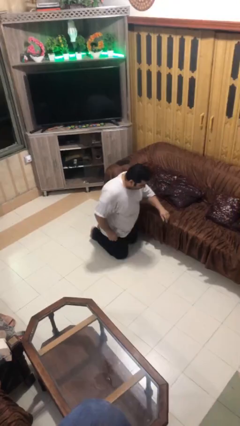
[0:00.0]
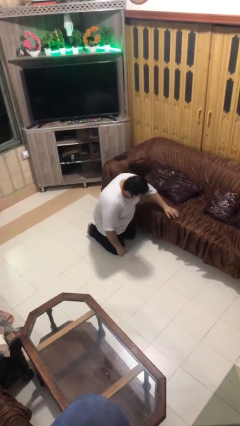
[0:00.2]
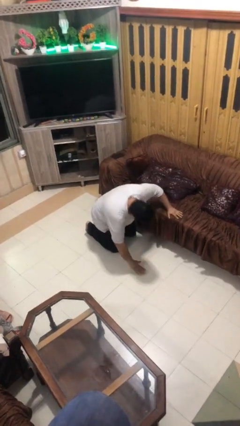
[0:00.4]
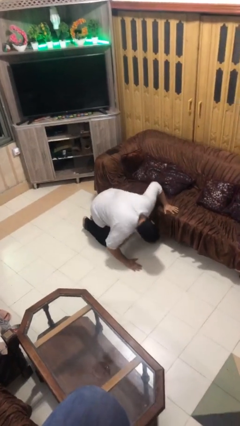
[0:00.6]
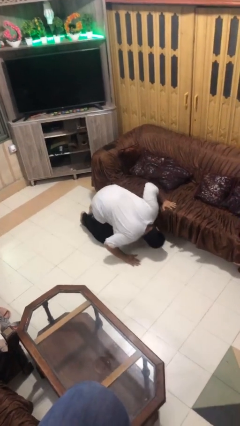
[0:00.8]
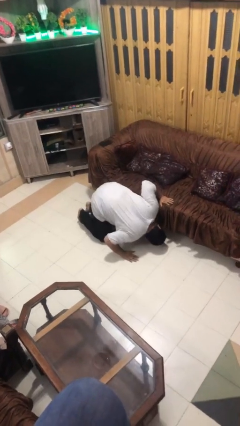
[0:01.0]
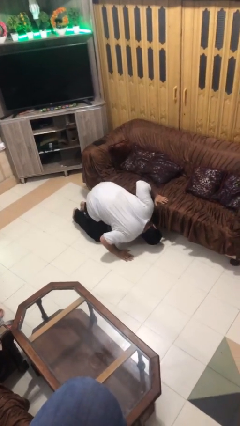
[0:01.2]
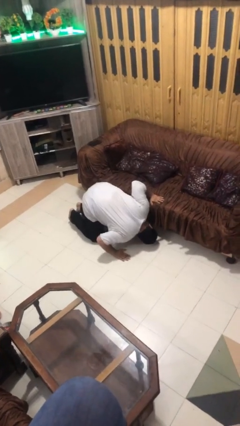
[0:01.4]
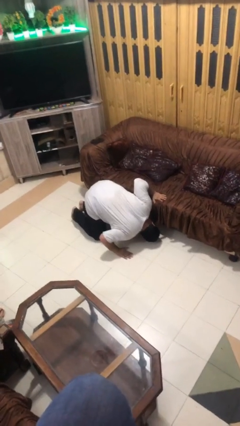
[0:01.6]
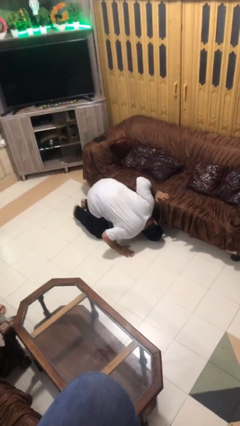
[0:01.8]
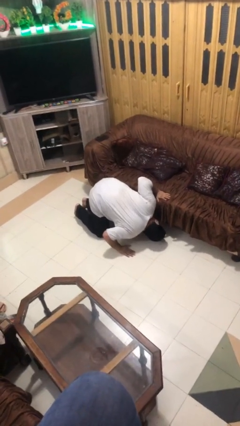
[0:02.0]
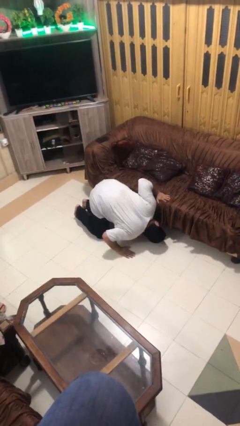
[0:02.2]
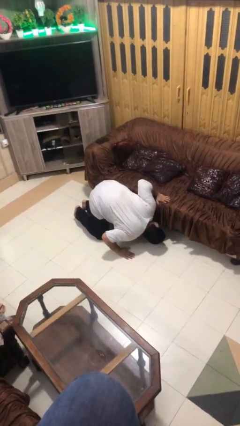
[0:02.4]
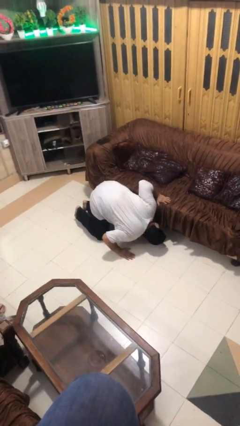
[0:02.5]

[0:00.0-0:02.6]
person searches under couch

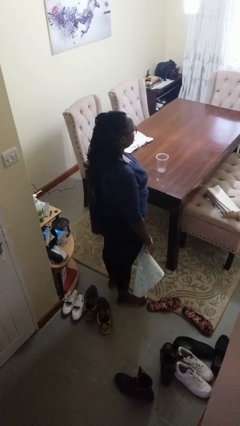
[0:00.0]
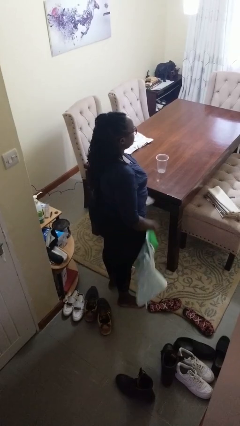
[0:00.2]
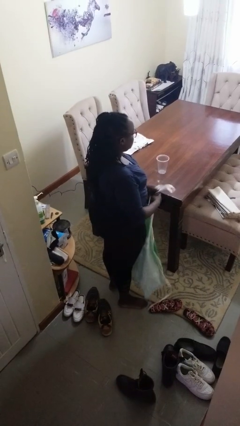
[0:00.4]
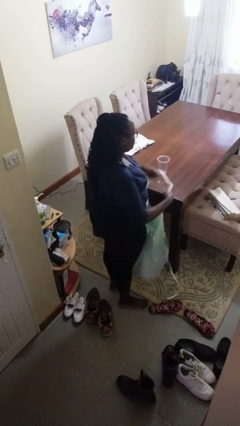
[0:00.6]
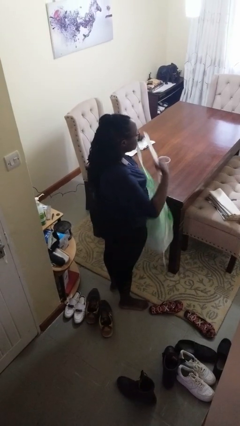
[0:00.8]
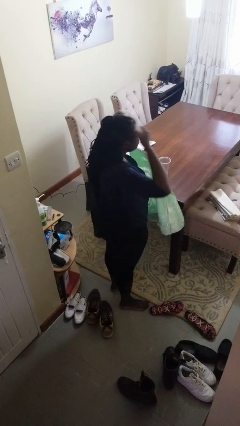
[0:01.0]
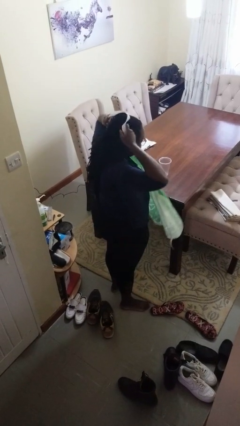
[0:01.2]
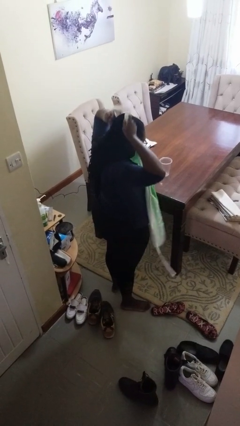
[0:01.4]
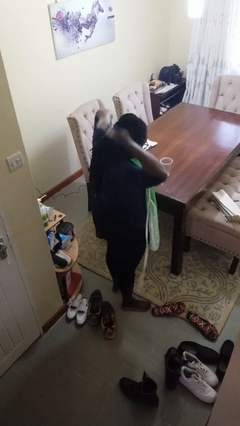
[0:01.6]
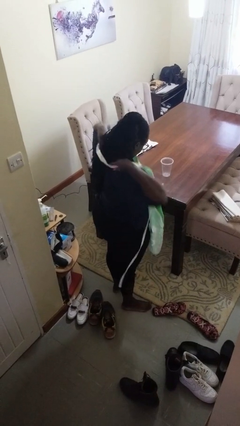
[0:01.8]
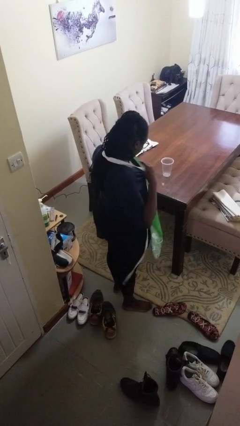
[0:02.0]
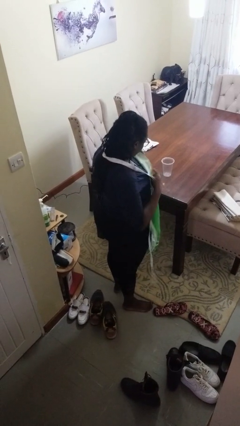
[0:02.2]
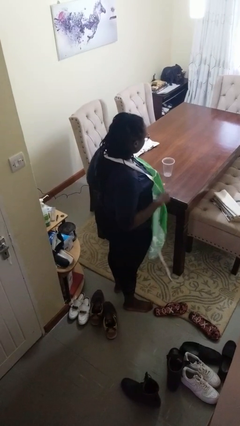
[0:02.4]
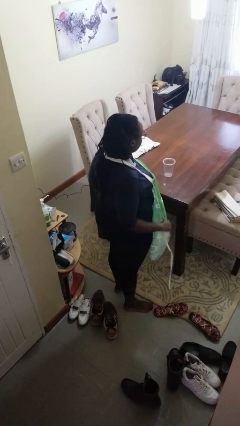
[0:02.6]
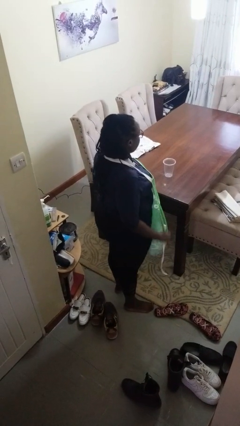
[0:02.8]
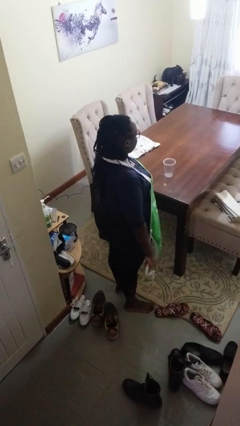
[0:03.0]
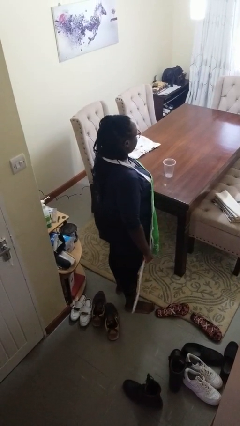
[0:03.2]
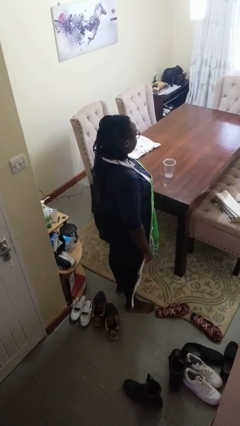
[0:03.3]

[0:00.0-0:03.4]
person puts on apron

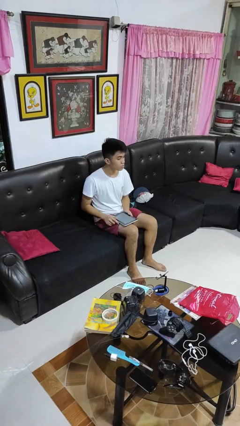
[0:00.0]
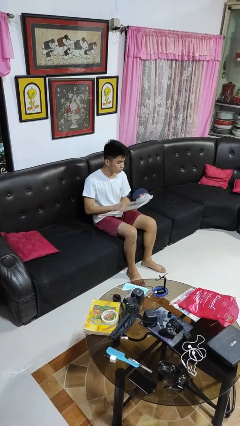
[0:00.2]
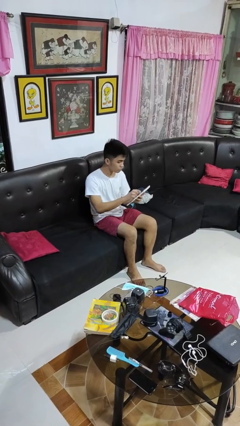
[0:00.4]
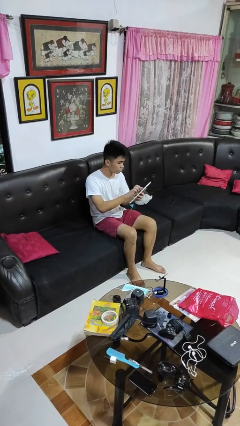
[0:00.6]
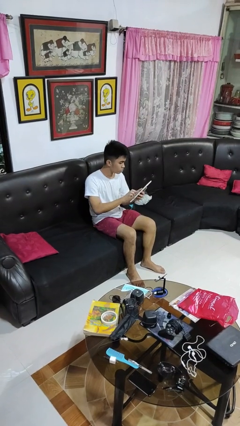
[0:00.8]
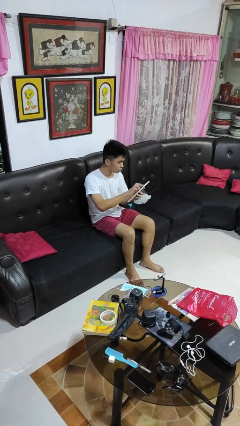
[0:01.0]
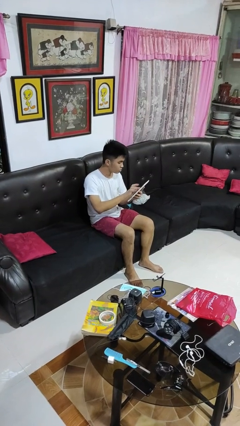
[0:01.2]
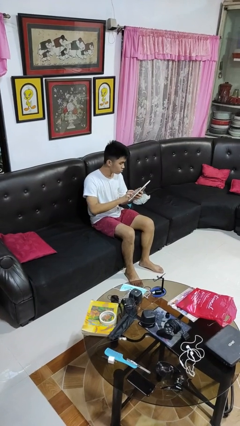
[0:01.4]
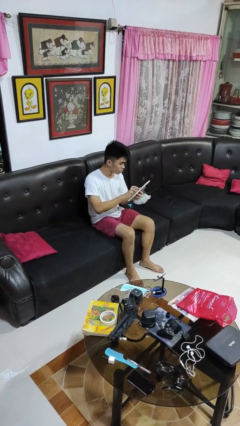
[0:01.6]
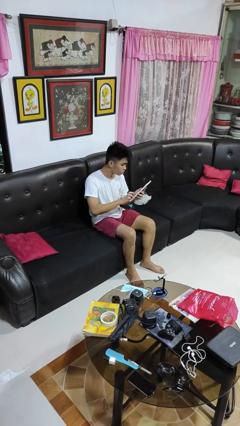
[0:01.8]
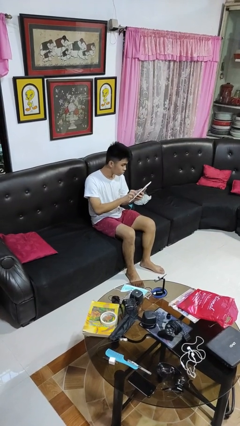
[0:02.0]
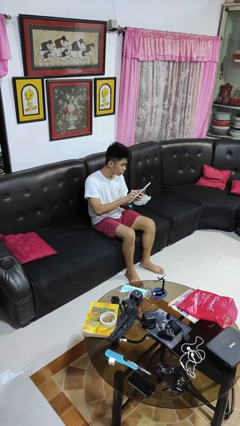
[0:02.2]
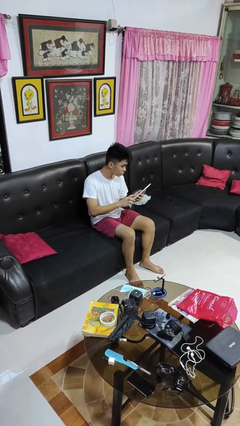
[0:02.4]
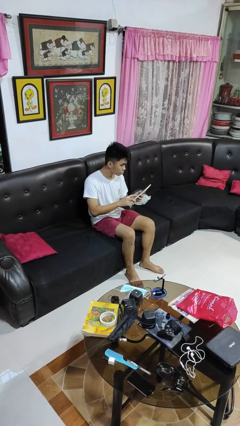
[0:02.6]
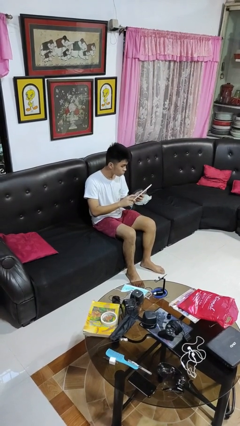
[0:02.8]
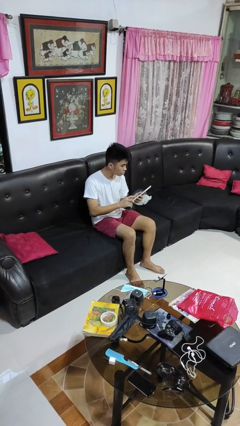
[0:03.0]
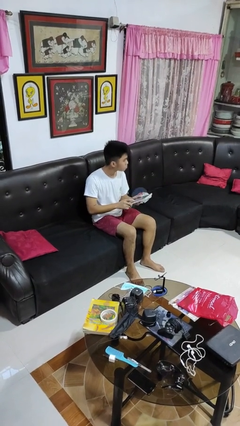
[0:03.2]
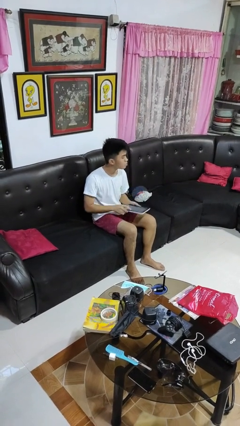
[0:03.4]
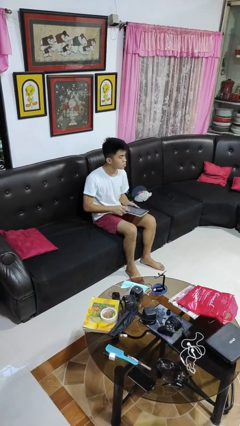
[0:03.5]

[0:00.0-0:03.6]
person interacts with tablet

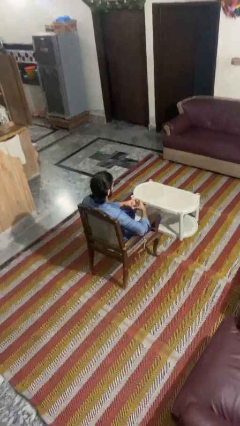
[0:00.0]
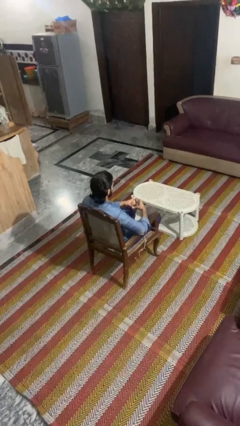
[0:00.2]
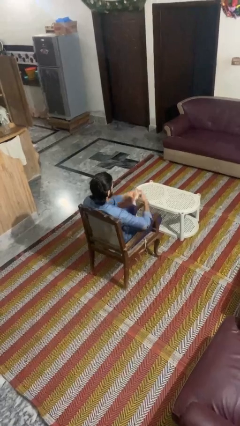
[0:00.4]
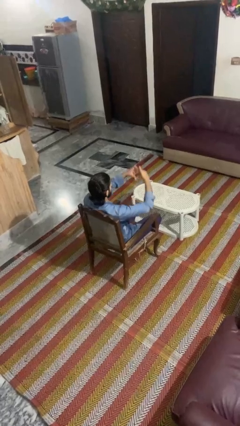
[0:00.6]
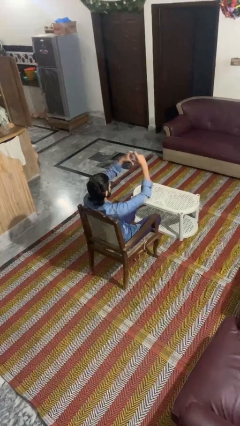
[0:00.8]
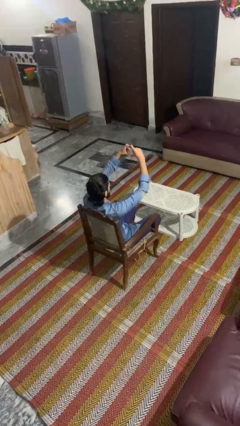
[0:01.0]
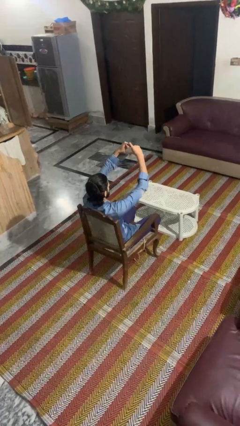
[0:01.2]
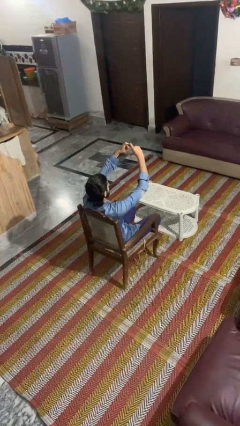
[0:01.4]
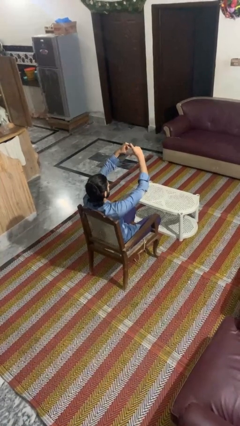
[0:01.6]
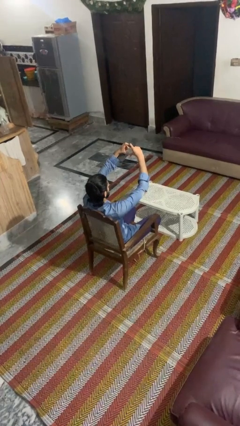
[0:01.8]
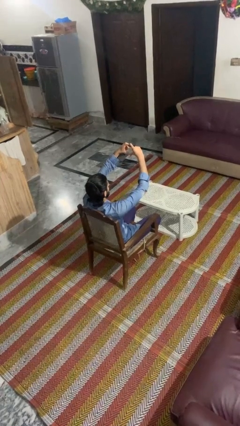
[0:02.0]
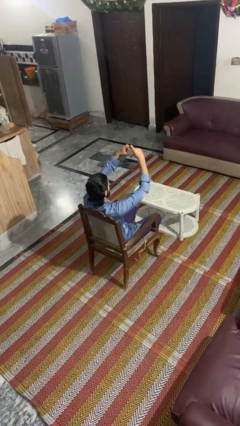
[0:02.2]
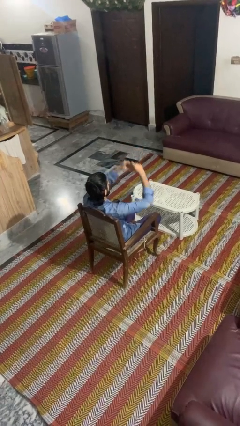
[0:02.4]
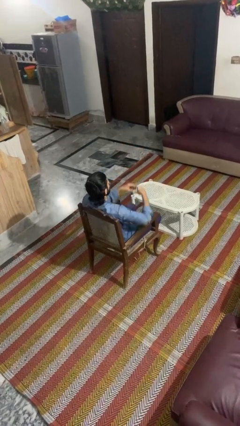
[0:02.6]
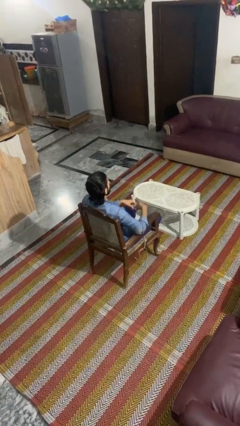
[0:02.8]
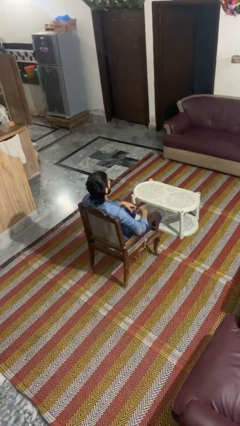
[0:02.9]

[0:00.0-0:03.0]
person gestures heart

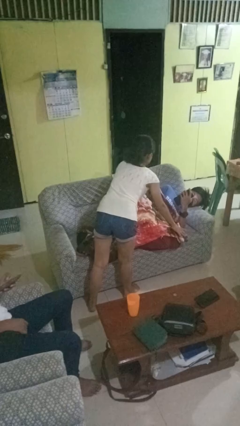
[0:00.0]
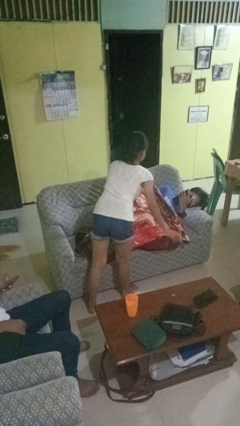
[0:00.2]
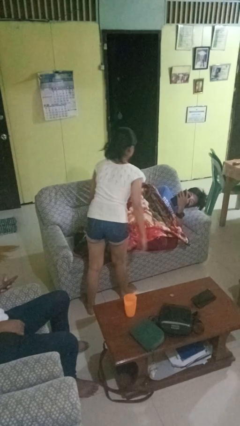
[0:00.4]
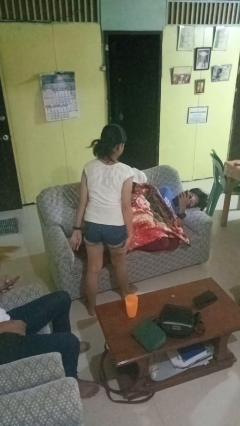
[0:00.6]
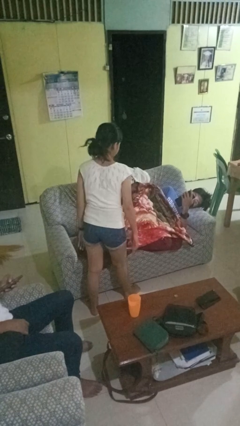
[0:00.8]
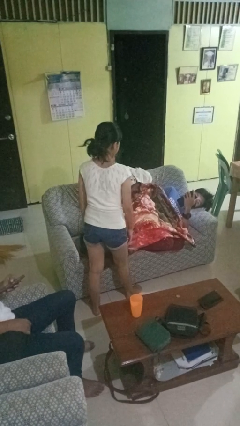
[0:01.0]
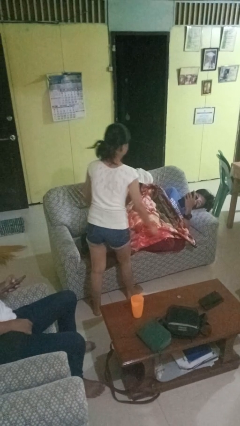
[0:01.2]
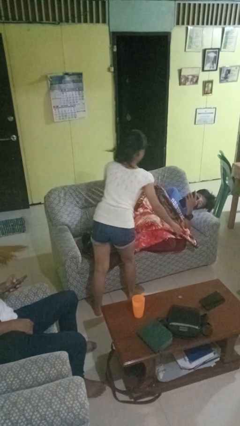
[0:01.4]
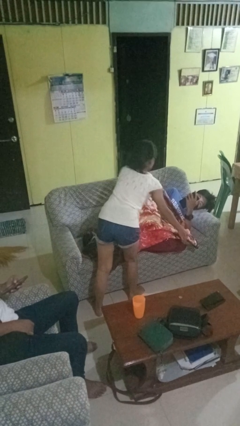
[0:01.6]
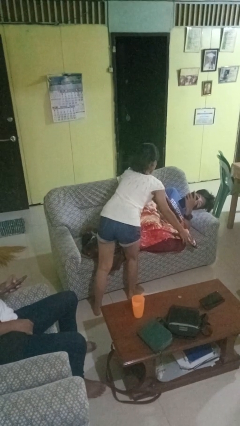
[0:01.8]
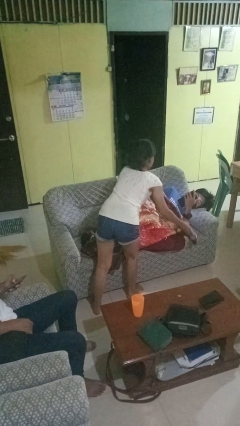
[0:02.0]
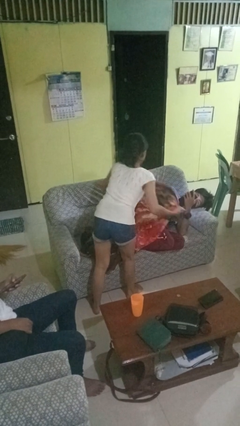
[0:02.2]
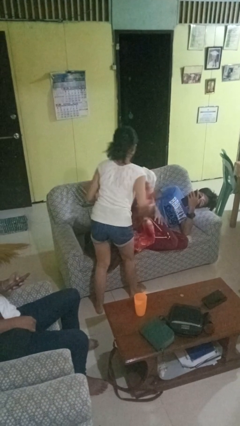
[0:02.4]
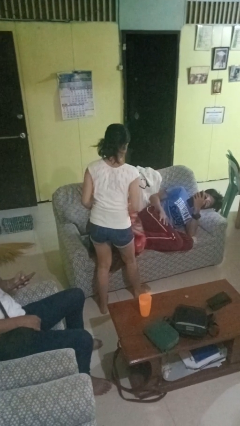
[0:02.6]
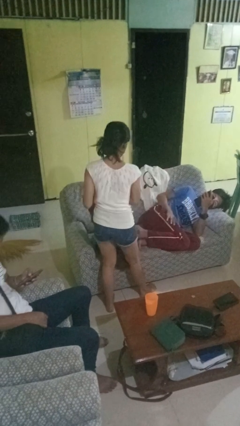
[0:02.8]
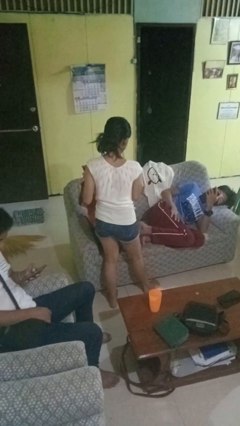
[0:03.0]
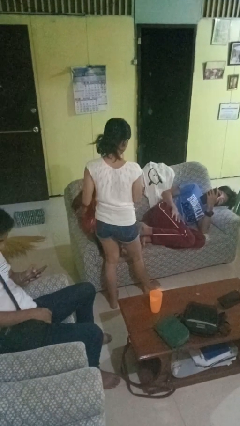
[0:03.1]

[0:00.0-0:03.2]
person uncovers friend with blanket

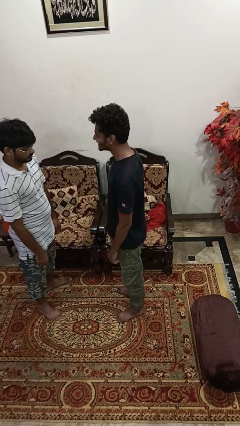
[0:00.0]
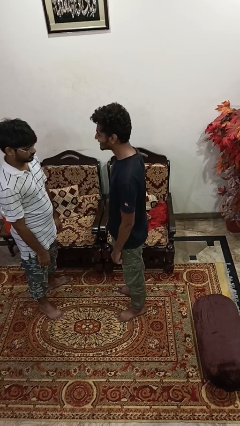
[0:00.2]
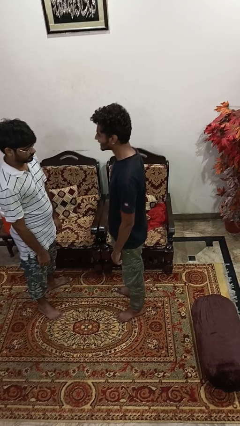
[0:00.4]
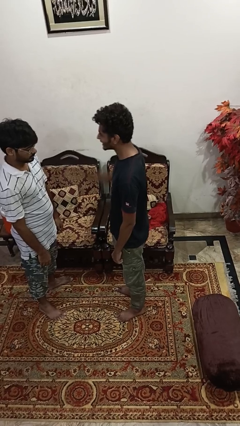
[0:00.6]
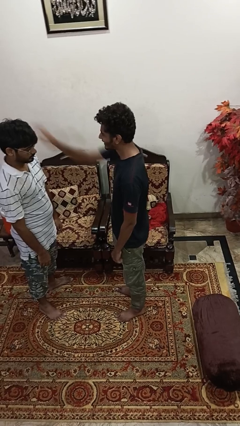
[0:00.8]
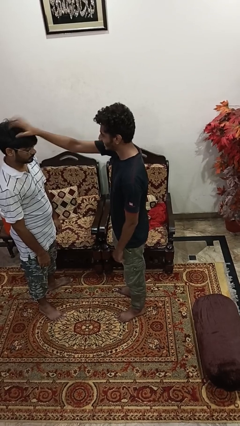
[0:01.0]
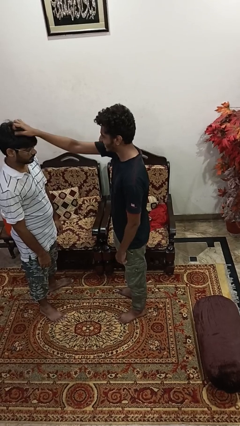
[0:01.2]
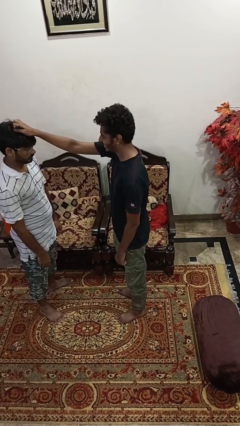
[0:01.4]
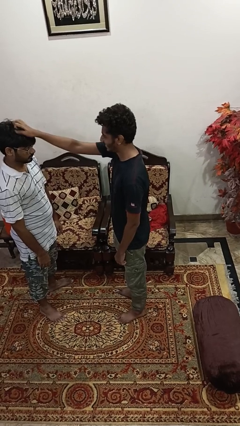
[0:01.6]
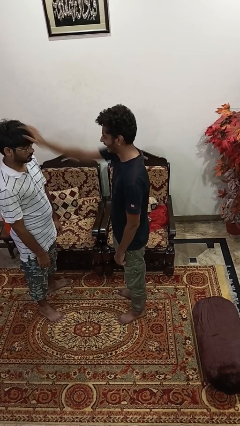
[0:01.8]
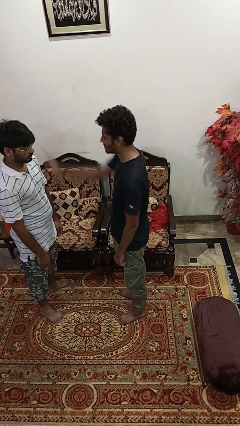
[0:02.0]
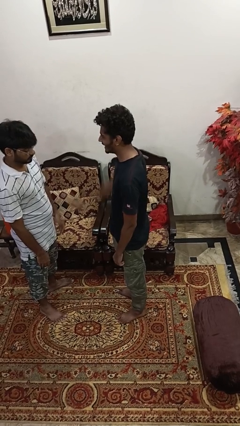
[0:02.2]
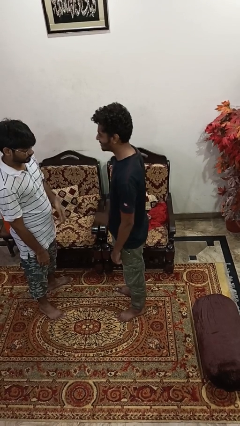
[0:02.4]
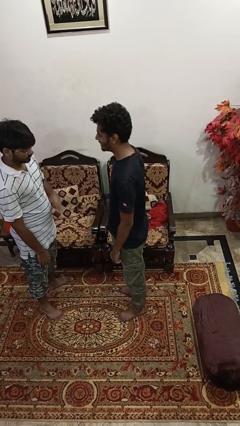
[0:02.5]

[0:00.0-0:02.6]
person grabs person by shoulder
